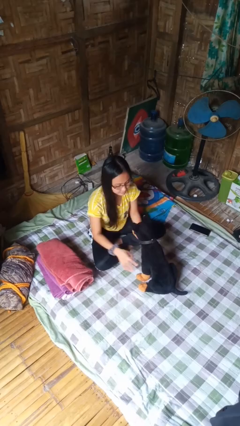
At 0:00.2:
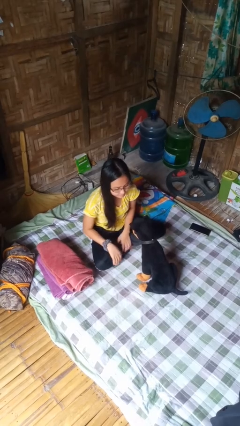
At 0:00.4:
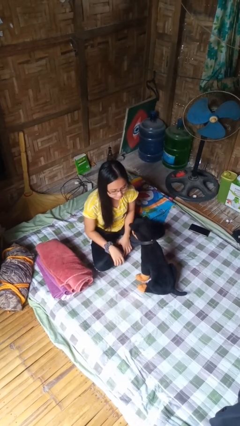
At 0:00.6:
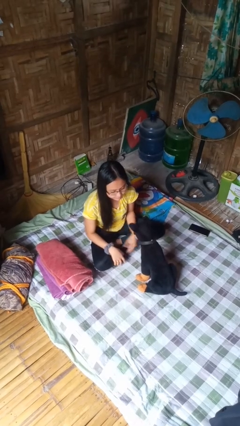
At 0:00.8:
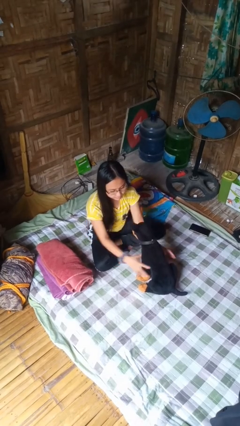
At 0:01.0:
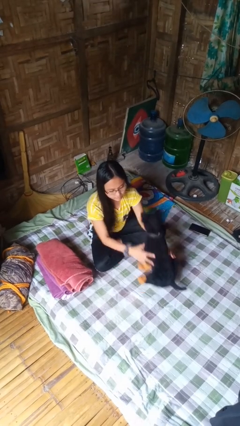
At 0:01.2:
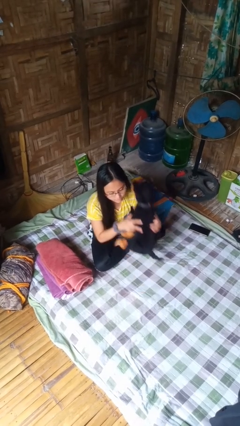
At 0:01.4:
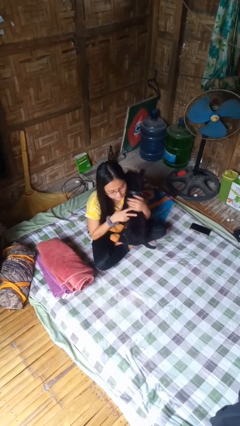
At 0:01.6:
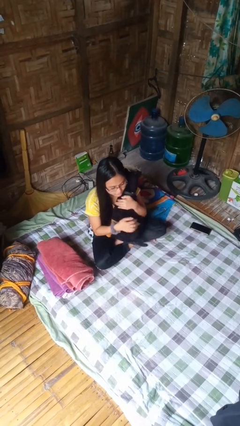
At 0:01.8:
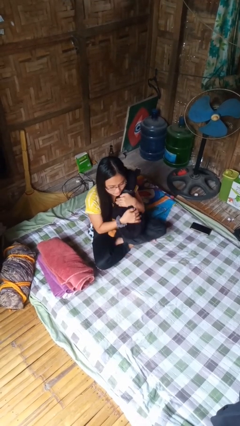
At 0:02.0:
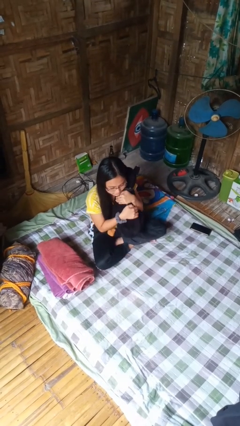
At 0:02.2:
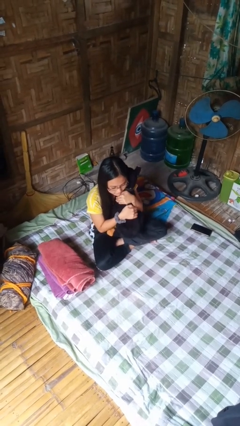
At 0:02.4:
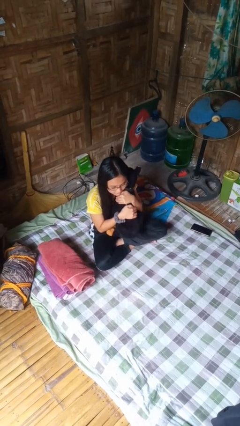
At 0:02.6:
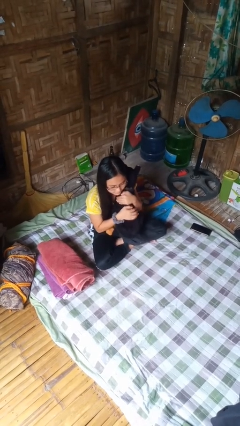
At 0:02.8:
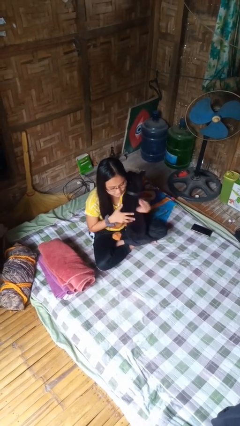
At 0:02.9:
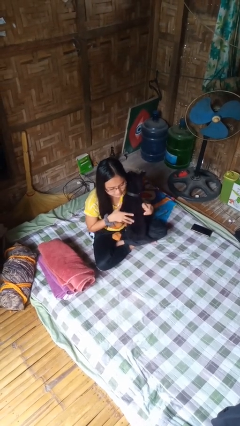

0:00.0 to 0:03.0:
person hugs stuffed animal

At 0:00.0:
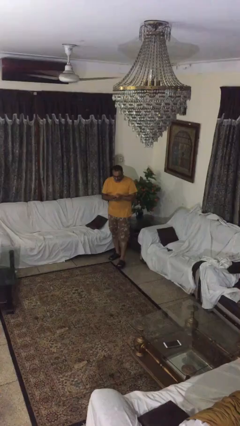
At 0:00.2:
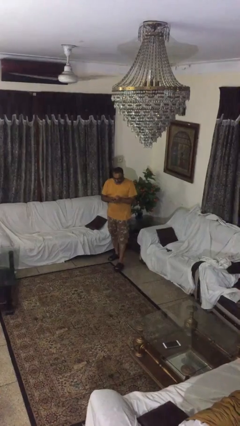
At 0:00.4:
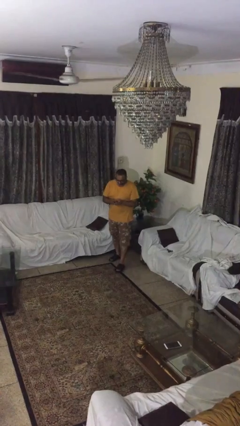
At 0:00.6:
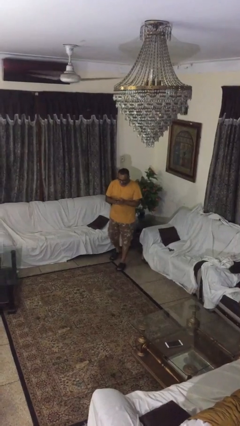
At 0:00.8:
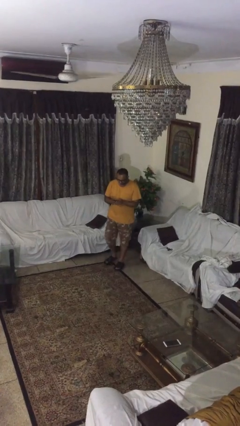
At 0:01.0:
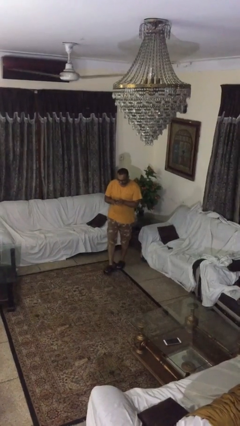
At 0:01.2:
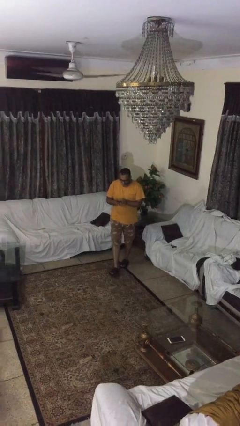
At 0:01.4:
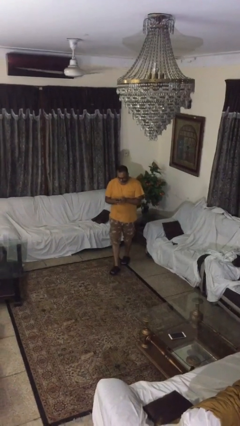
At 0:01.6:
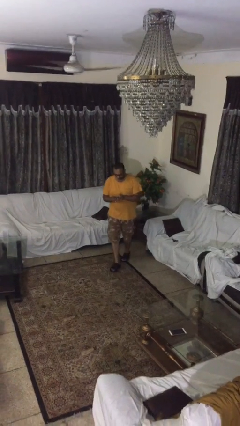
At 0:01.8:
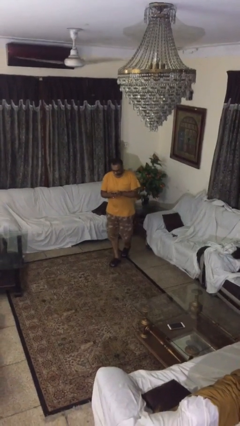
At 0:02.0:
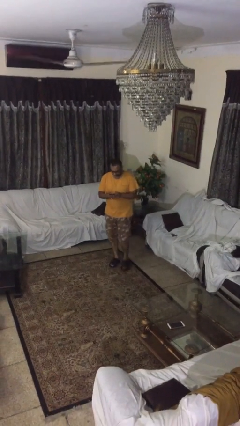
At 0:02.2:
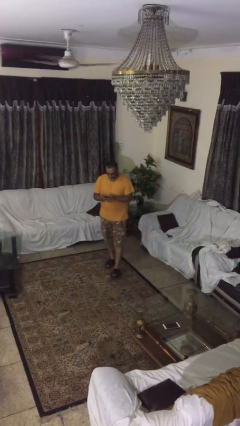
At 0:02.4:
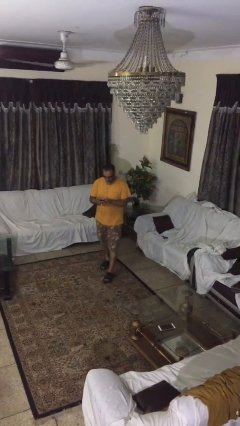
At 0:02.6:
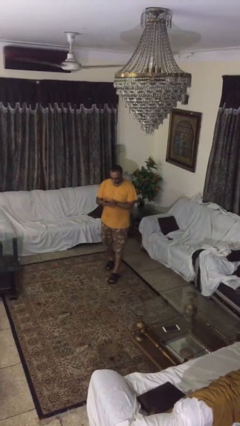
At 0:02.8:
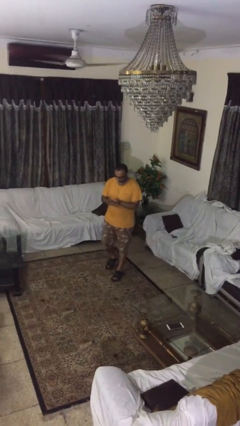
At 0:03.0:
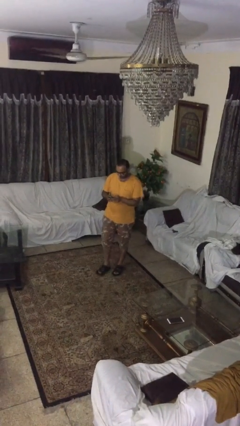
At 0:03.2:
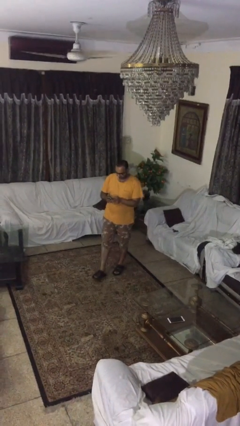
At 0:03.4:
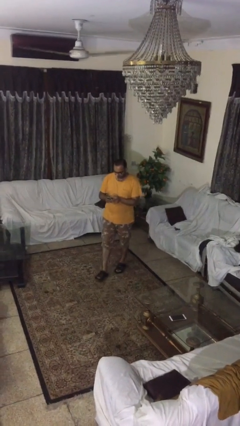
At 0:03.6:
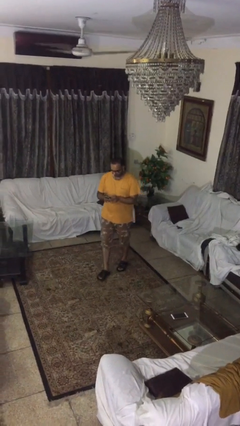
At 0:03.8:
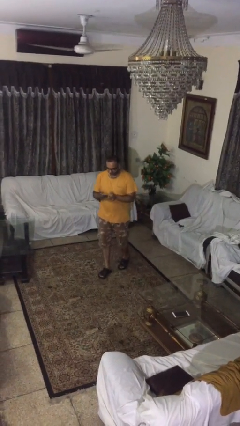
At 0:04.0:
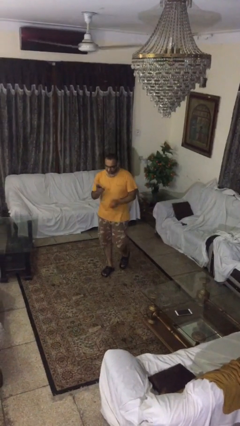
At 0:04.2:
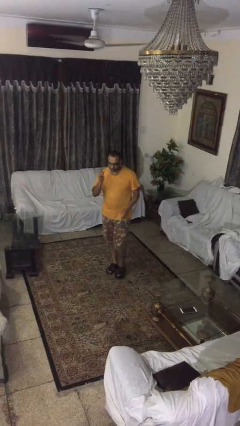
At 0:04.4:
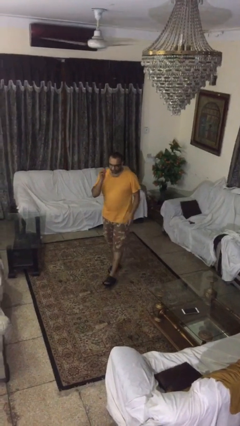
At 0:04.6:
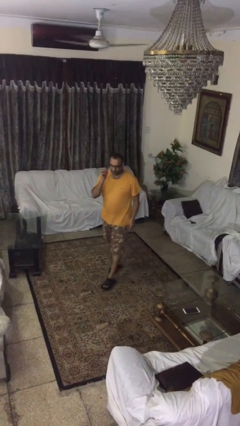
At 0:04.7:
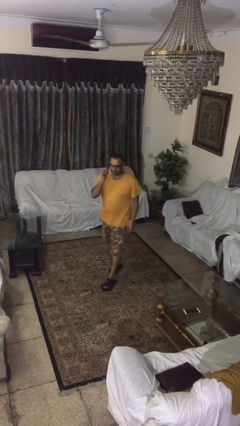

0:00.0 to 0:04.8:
person texts on phone

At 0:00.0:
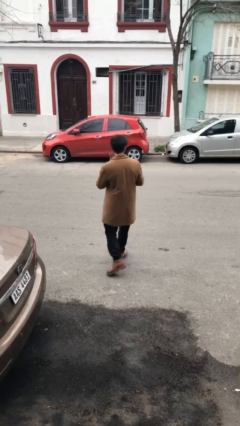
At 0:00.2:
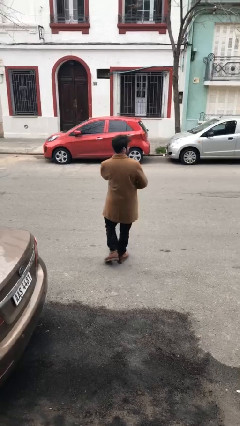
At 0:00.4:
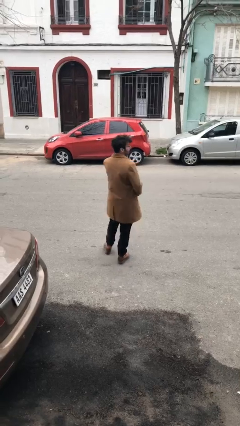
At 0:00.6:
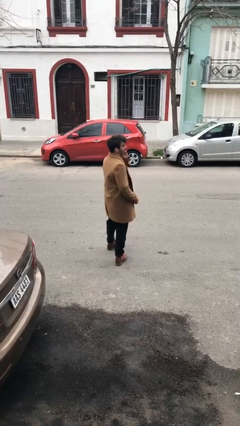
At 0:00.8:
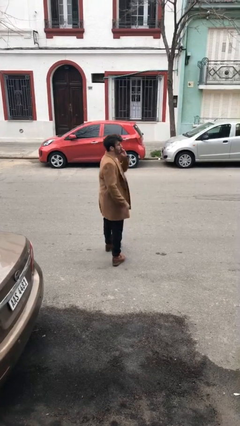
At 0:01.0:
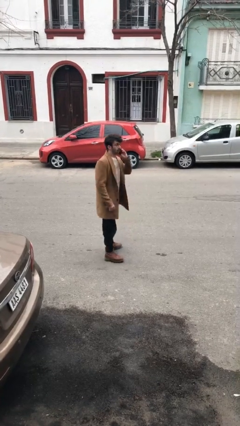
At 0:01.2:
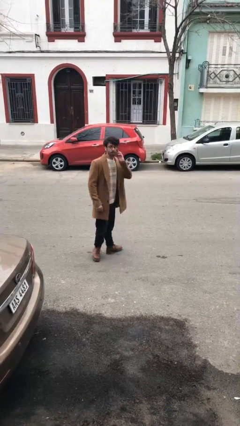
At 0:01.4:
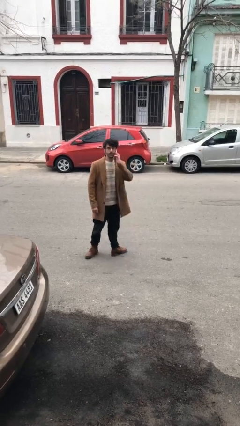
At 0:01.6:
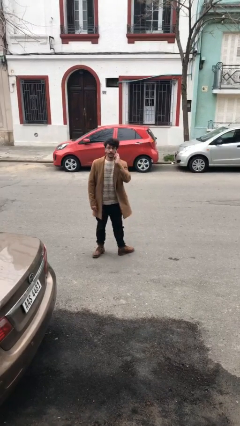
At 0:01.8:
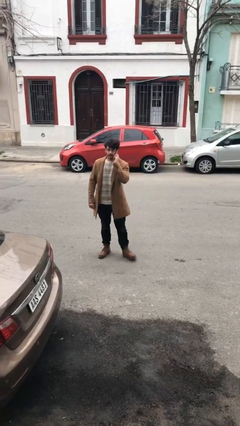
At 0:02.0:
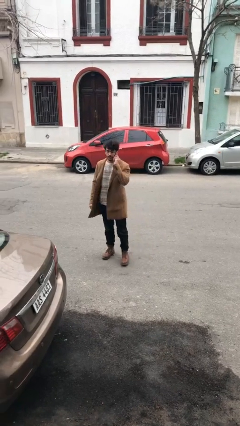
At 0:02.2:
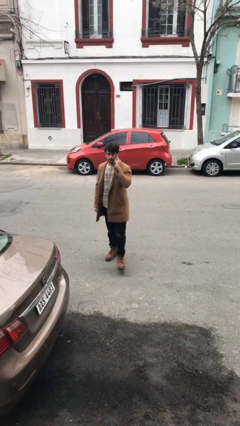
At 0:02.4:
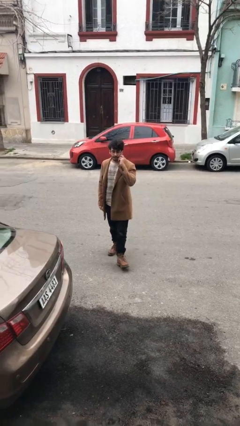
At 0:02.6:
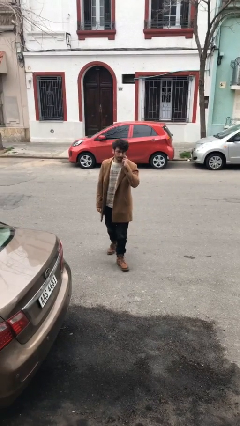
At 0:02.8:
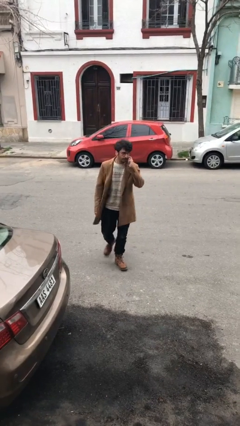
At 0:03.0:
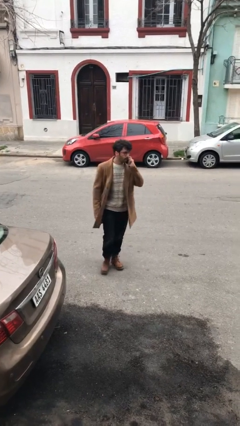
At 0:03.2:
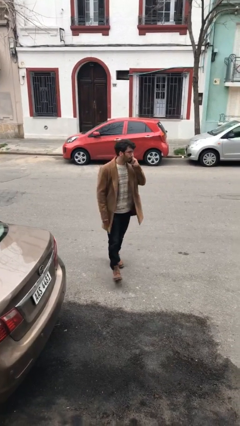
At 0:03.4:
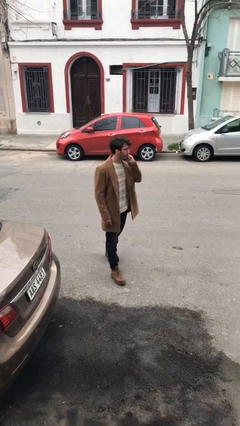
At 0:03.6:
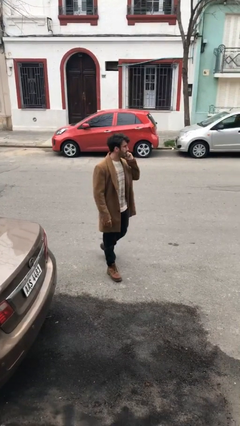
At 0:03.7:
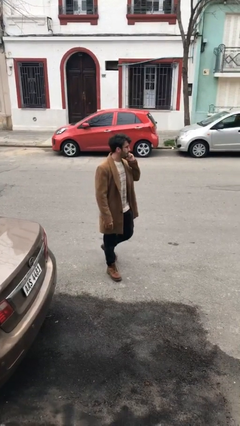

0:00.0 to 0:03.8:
person talks on phone

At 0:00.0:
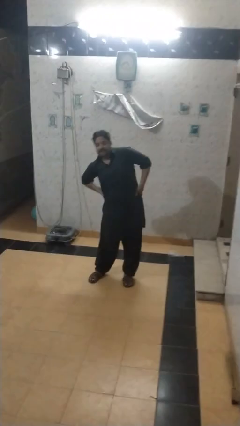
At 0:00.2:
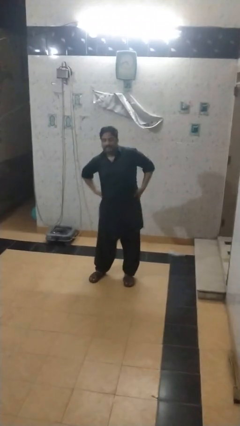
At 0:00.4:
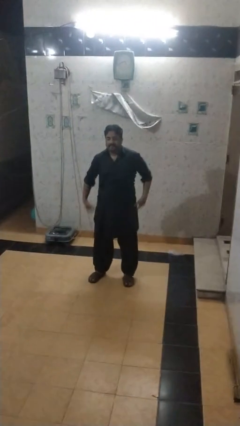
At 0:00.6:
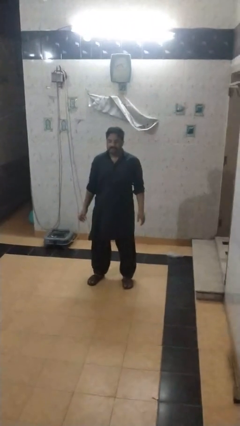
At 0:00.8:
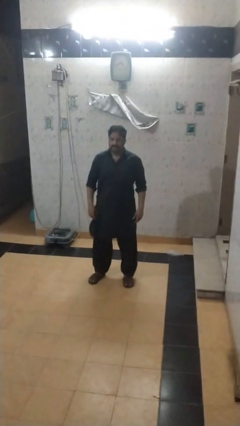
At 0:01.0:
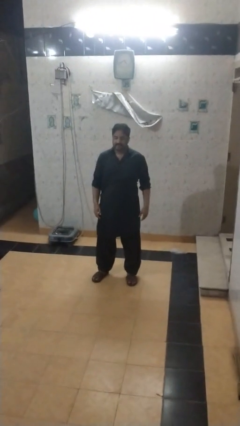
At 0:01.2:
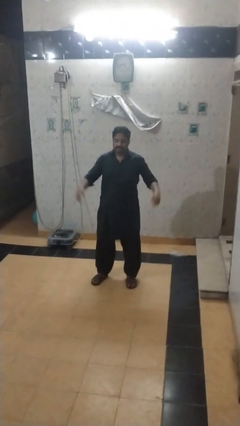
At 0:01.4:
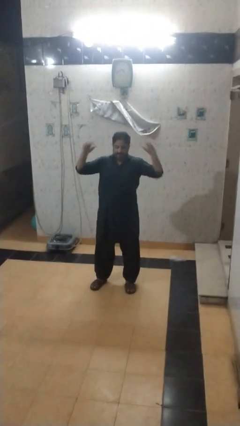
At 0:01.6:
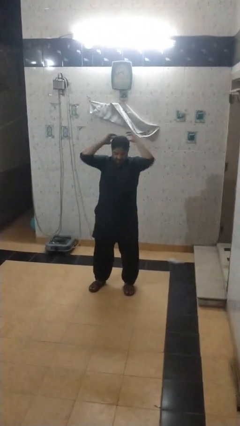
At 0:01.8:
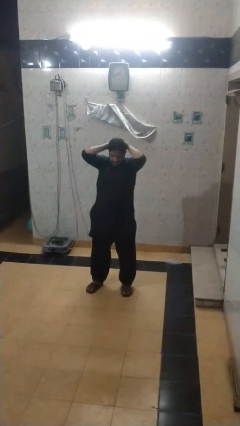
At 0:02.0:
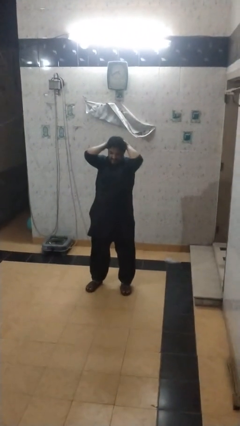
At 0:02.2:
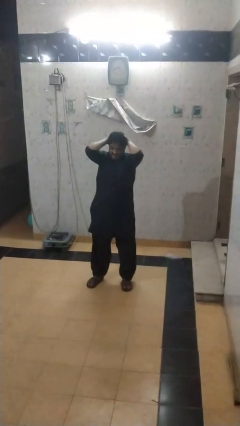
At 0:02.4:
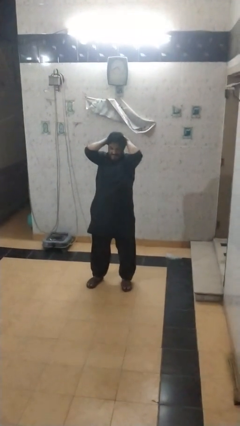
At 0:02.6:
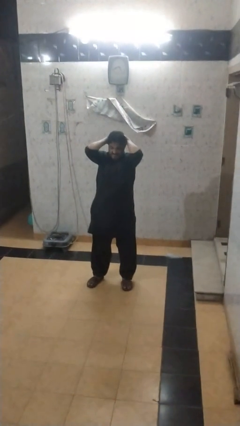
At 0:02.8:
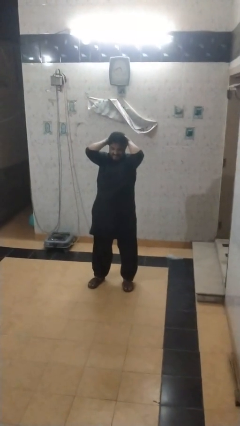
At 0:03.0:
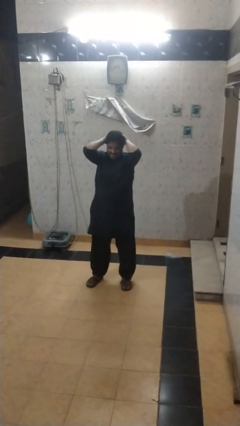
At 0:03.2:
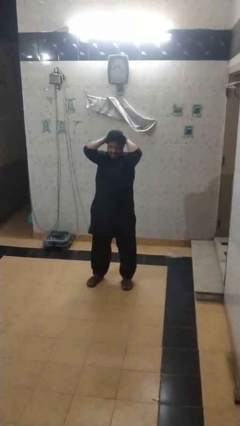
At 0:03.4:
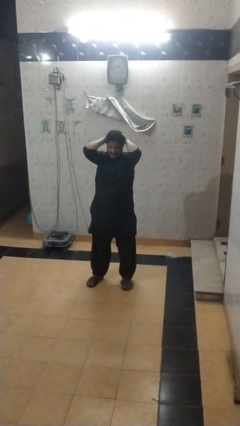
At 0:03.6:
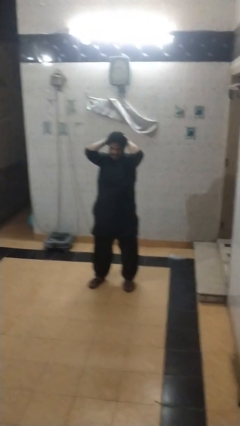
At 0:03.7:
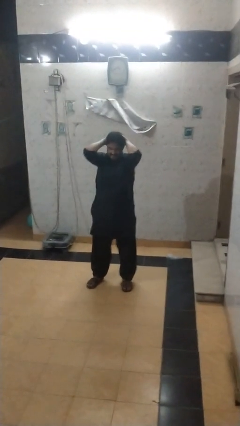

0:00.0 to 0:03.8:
person stretches arms over head

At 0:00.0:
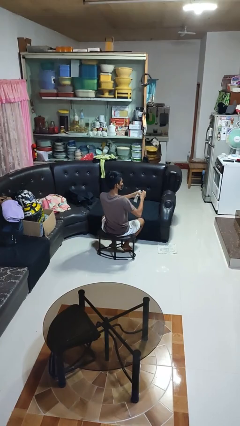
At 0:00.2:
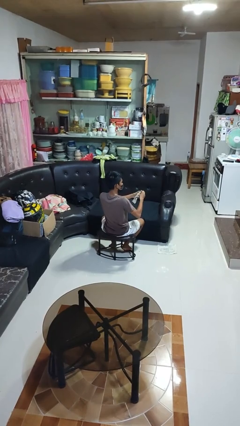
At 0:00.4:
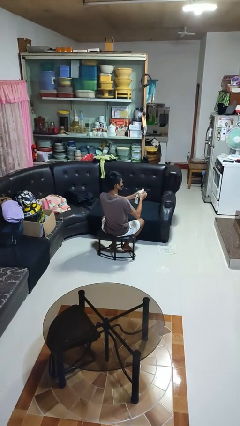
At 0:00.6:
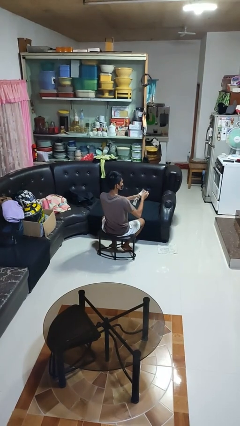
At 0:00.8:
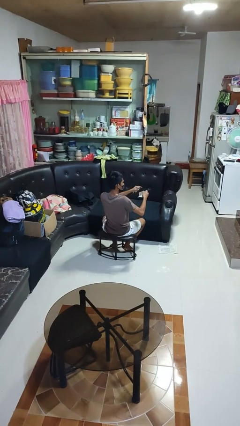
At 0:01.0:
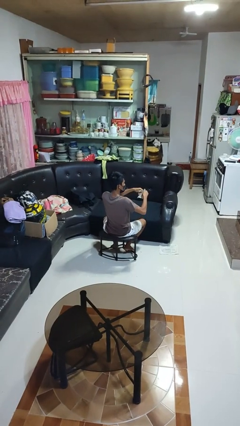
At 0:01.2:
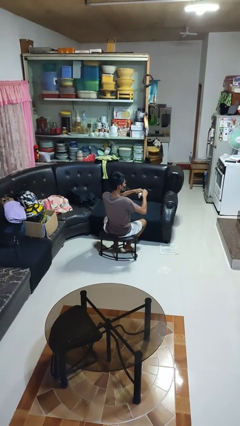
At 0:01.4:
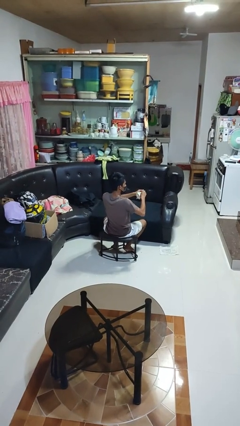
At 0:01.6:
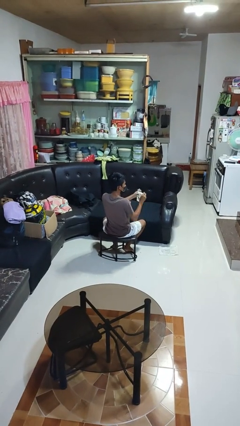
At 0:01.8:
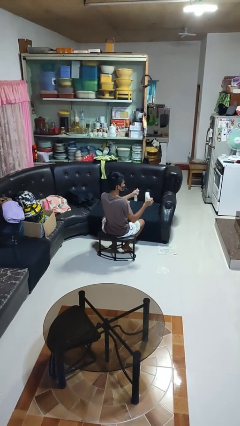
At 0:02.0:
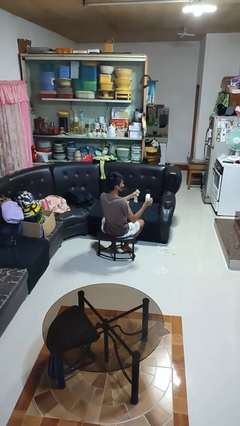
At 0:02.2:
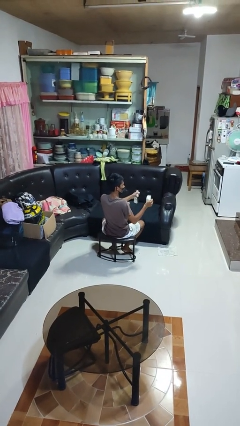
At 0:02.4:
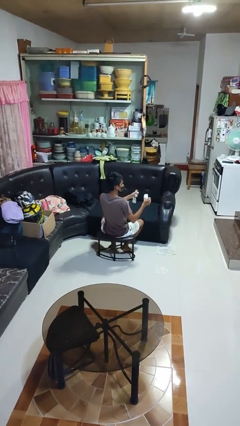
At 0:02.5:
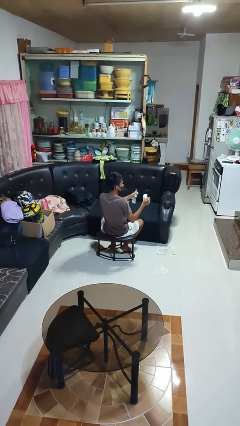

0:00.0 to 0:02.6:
person tears paper
